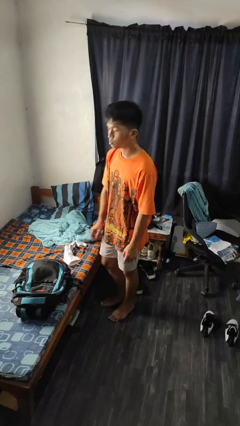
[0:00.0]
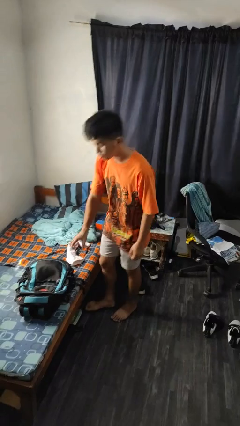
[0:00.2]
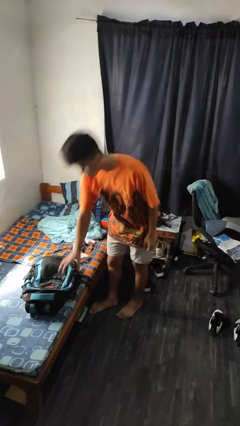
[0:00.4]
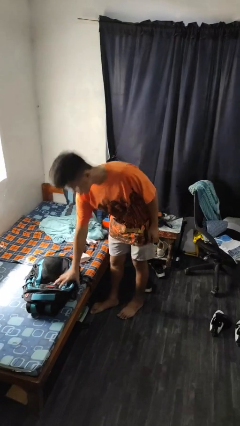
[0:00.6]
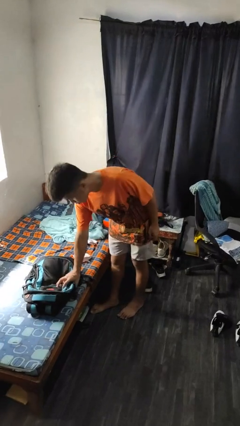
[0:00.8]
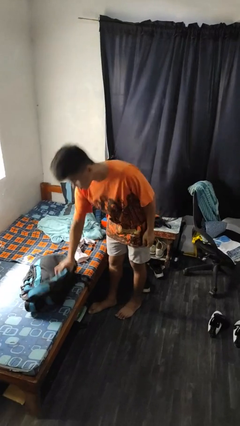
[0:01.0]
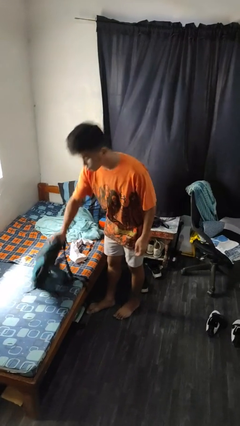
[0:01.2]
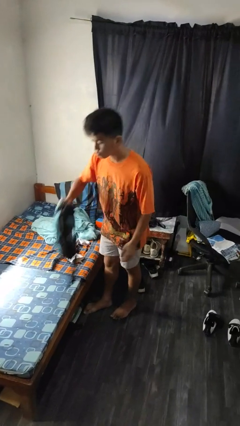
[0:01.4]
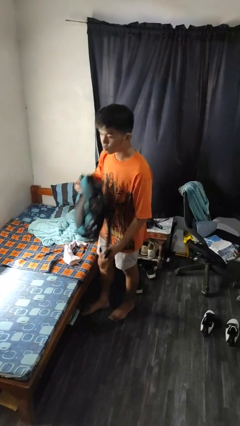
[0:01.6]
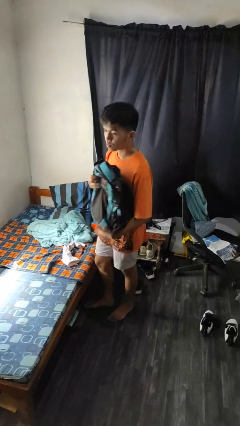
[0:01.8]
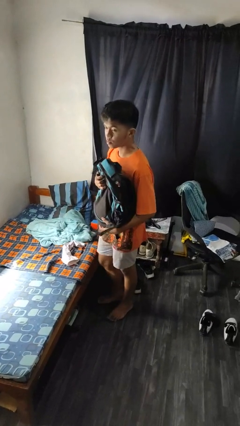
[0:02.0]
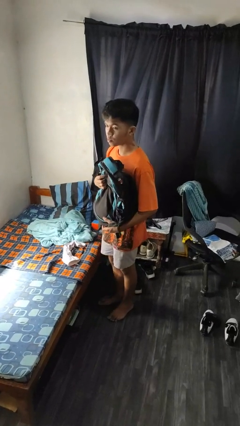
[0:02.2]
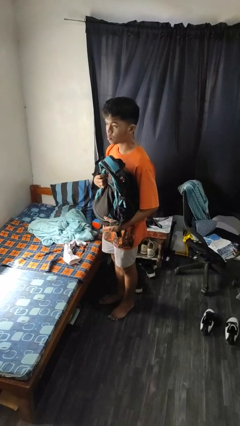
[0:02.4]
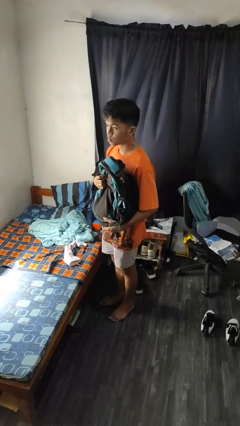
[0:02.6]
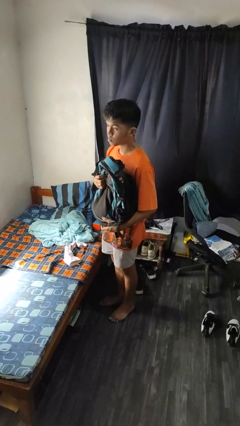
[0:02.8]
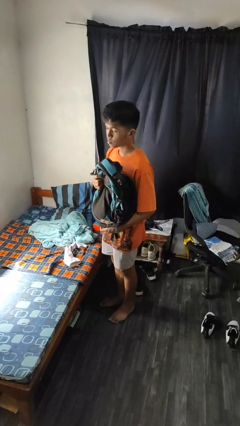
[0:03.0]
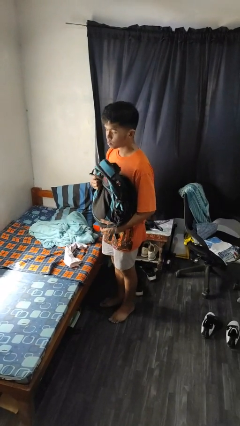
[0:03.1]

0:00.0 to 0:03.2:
person picks up object from bed

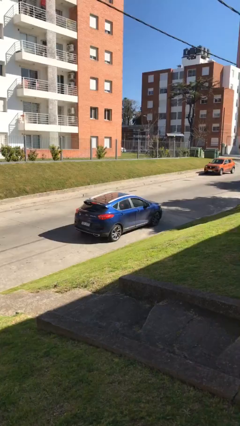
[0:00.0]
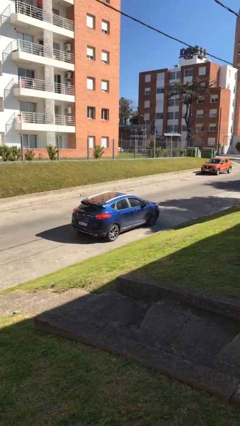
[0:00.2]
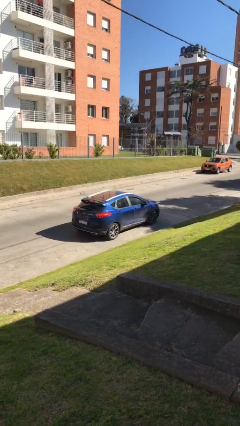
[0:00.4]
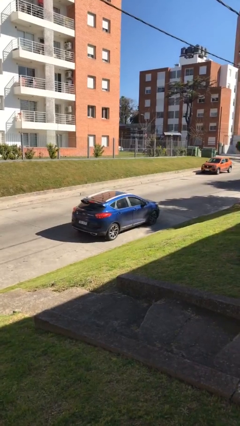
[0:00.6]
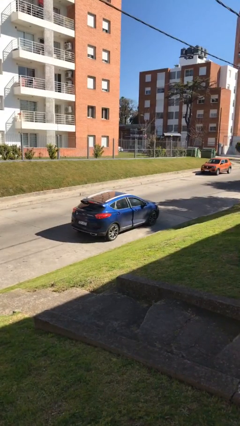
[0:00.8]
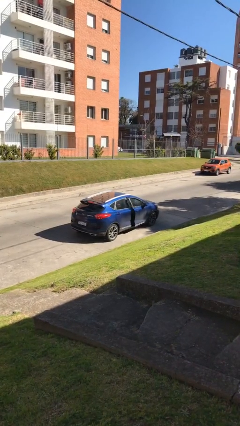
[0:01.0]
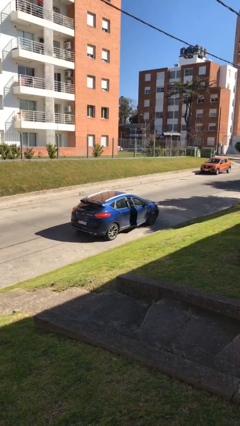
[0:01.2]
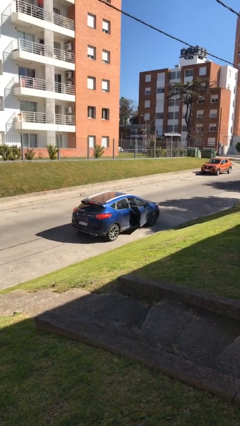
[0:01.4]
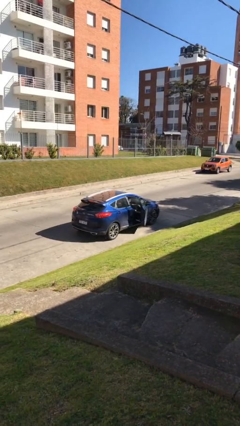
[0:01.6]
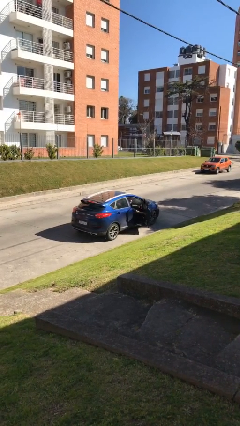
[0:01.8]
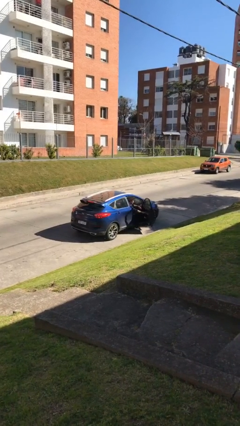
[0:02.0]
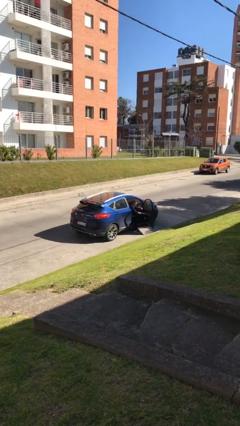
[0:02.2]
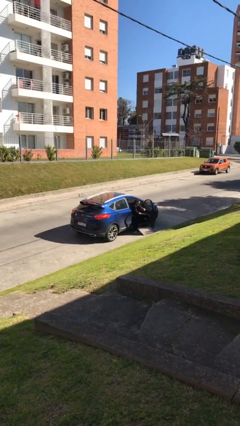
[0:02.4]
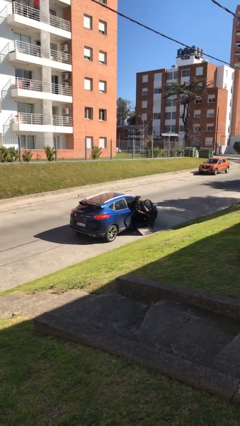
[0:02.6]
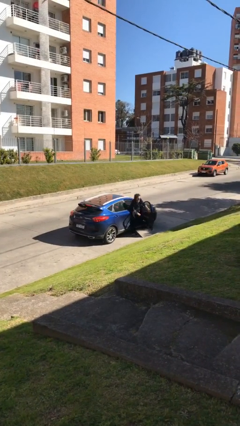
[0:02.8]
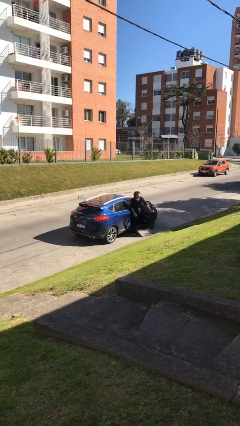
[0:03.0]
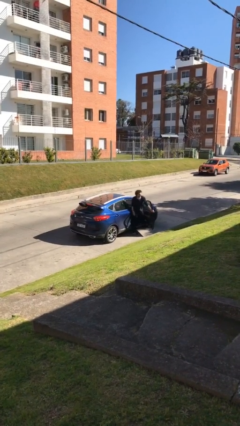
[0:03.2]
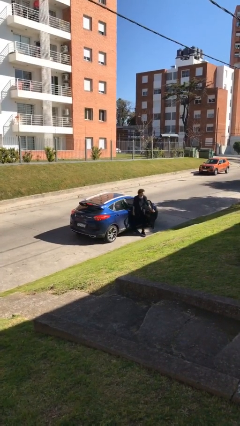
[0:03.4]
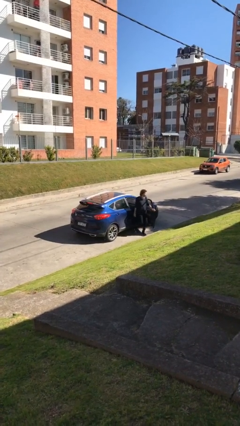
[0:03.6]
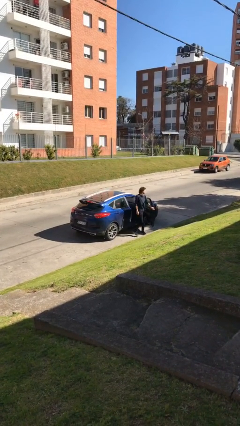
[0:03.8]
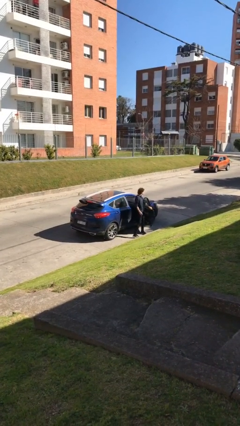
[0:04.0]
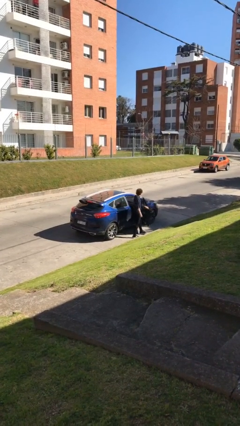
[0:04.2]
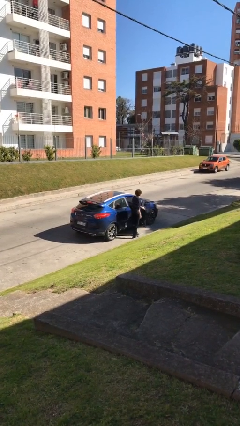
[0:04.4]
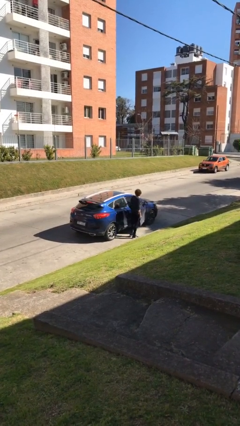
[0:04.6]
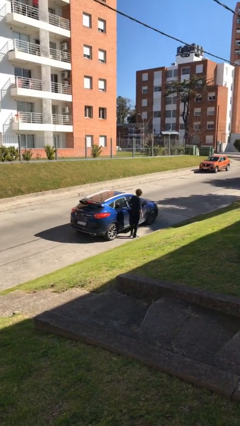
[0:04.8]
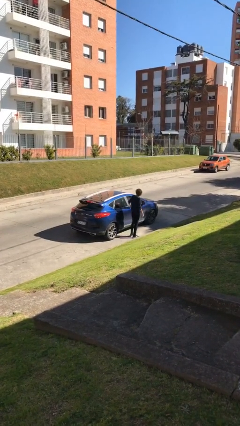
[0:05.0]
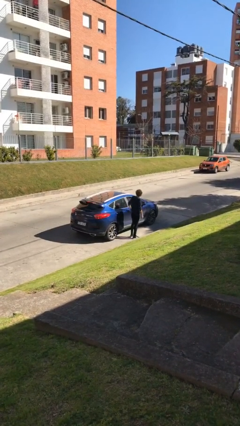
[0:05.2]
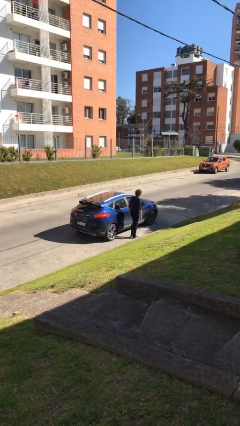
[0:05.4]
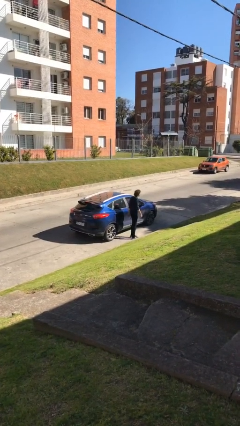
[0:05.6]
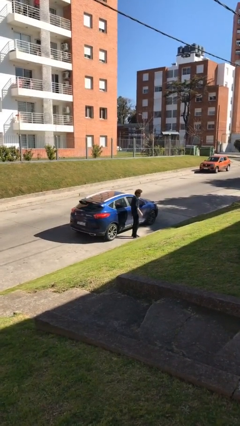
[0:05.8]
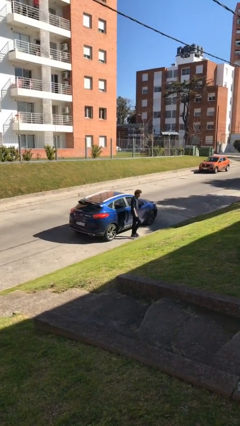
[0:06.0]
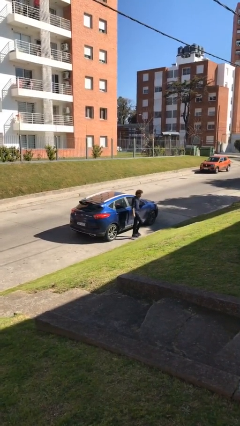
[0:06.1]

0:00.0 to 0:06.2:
car drops off person

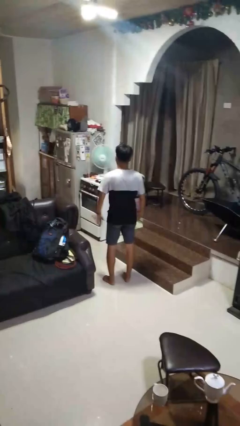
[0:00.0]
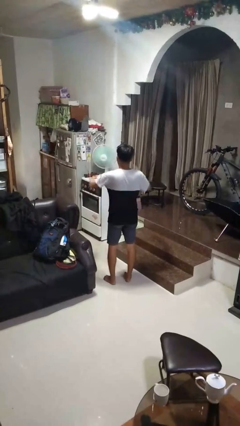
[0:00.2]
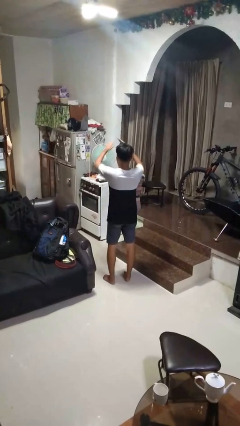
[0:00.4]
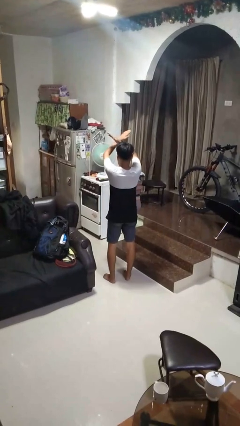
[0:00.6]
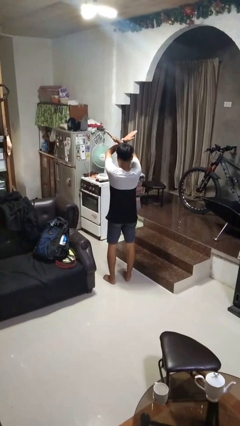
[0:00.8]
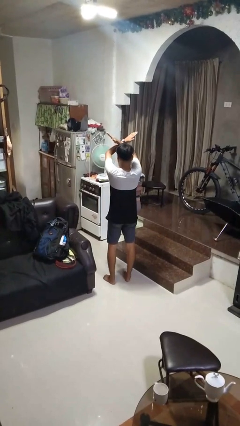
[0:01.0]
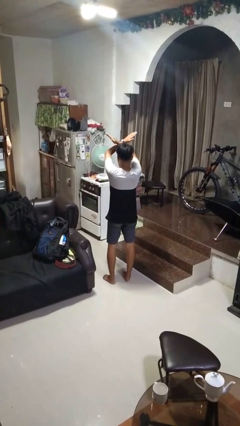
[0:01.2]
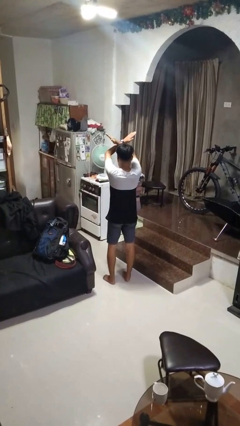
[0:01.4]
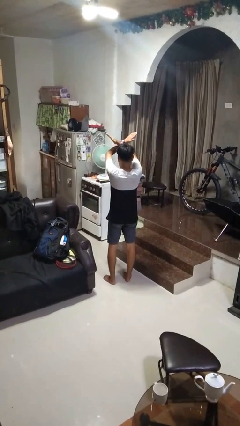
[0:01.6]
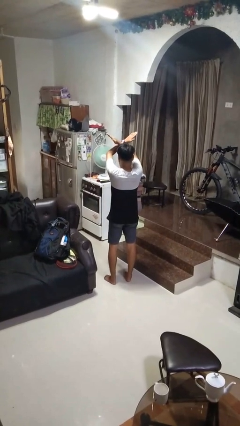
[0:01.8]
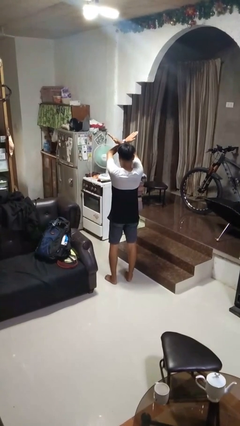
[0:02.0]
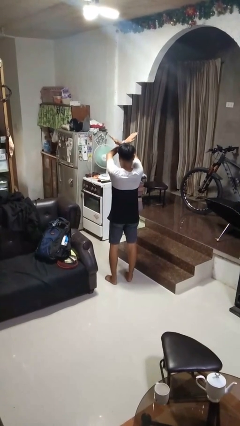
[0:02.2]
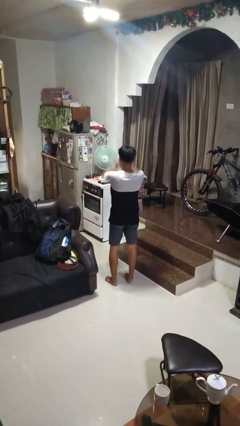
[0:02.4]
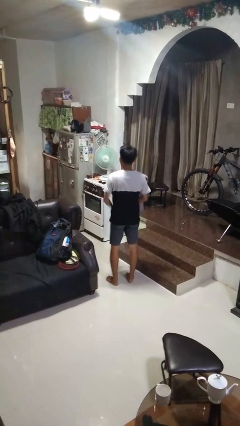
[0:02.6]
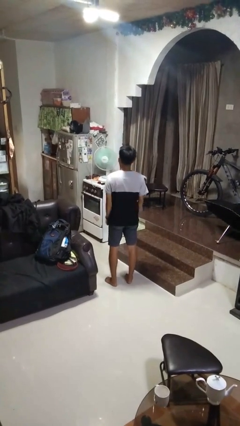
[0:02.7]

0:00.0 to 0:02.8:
person gestures arms x

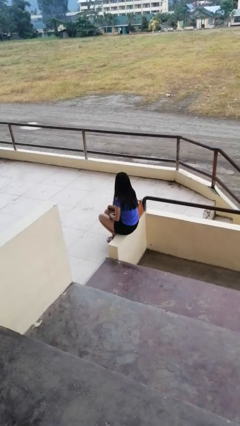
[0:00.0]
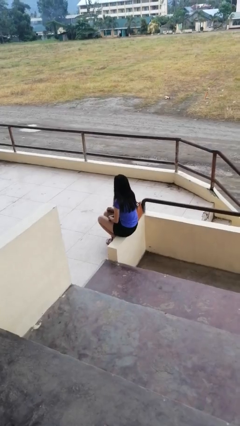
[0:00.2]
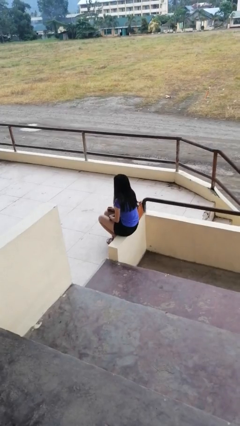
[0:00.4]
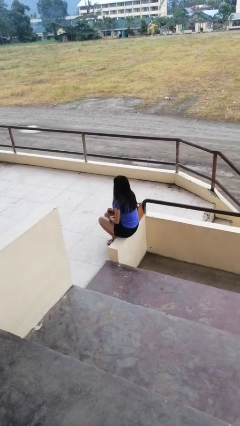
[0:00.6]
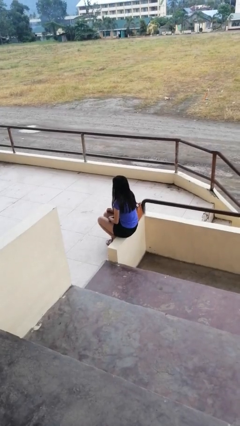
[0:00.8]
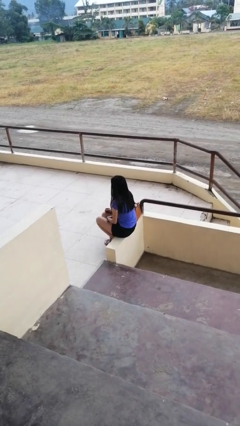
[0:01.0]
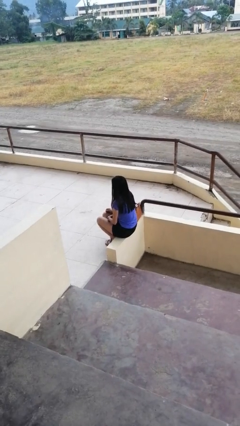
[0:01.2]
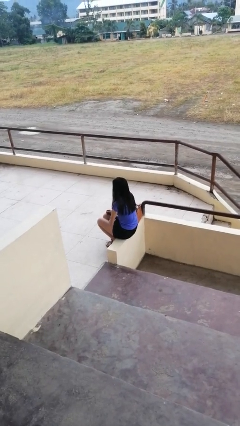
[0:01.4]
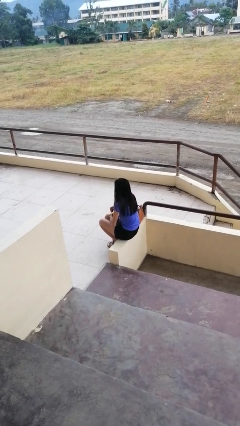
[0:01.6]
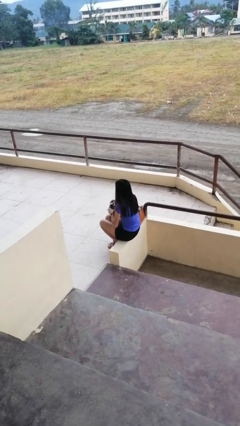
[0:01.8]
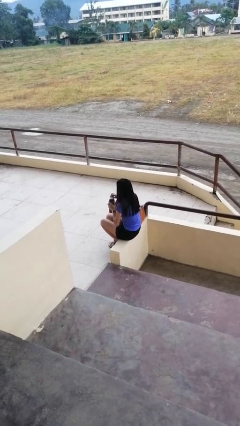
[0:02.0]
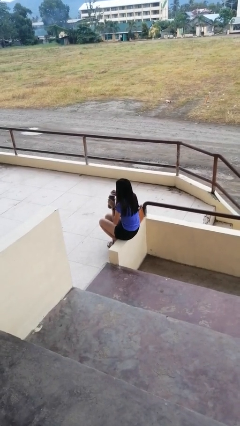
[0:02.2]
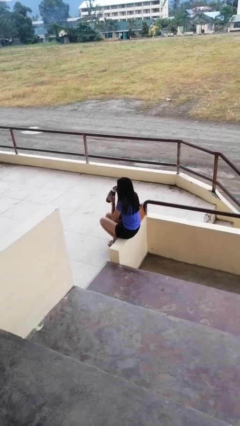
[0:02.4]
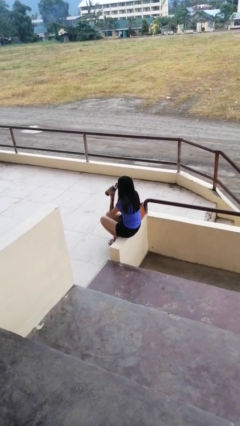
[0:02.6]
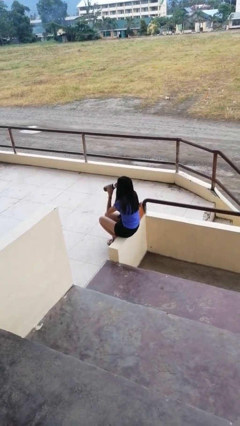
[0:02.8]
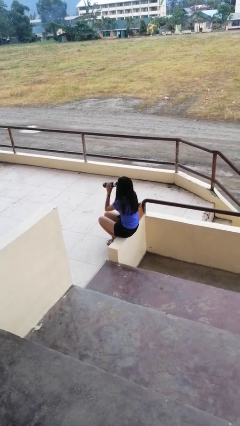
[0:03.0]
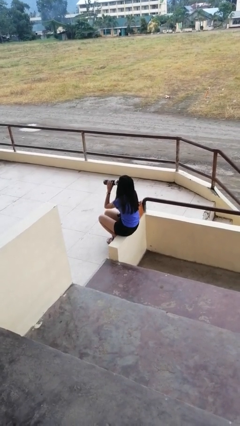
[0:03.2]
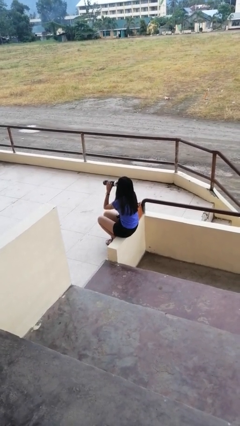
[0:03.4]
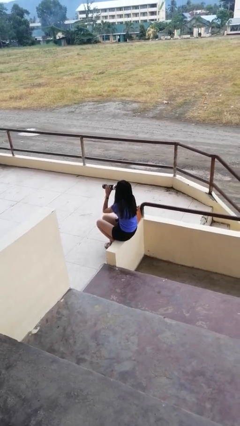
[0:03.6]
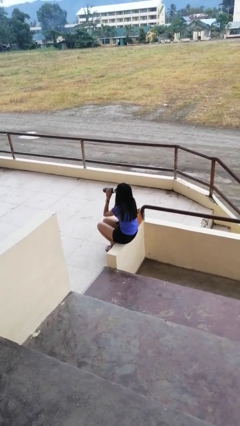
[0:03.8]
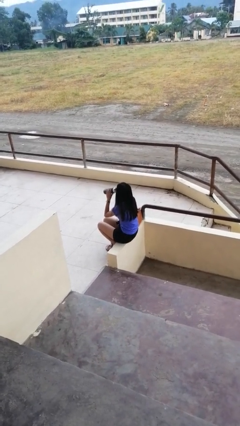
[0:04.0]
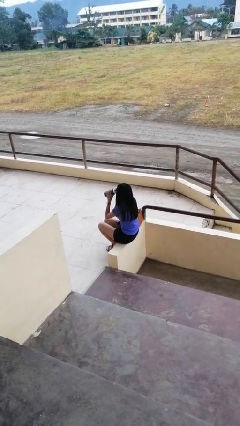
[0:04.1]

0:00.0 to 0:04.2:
person drinks from bottle

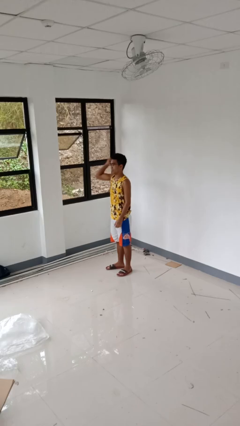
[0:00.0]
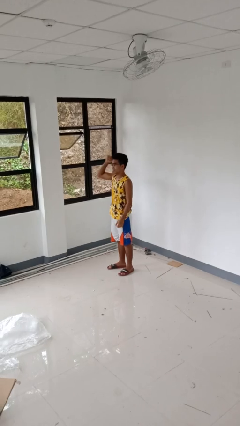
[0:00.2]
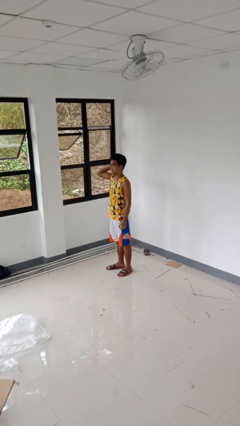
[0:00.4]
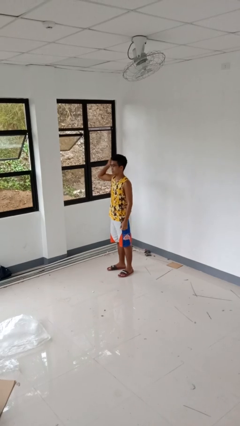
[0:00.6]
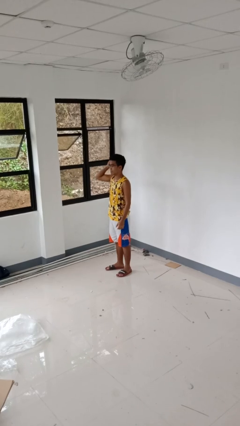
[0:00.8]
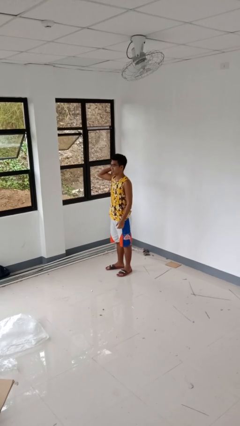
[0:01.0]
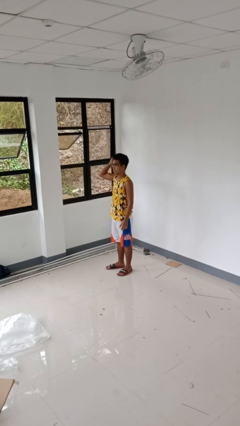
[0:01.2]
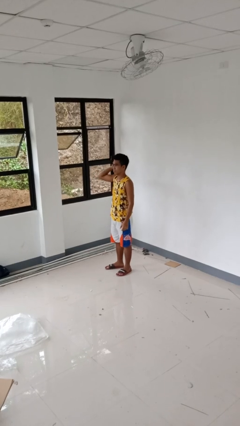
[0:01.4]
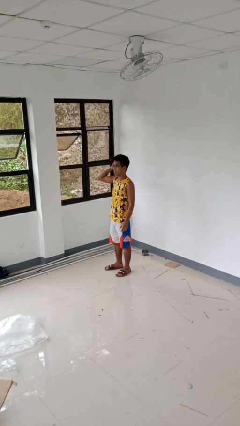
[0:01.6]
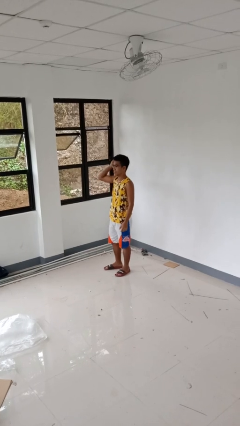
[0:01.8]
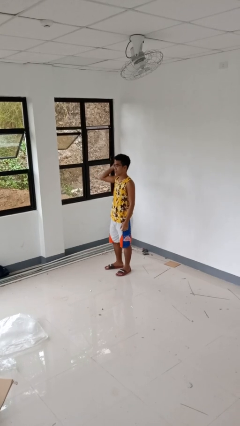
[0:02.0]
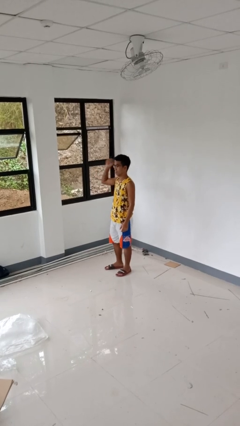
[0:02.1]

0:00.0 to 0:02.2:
person gestures behind me
